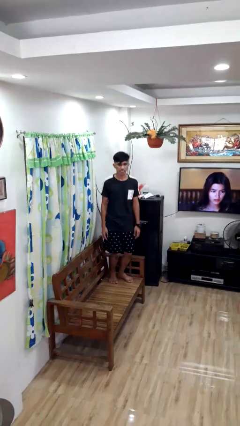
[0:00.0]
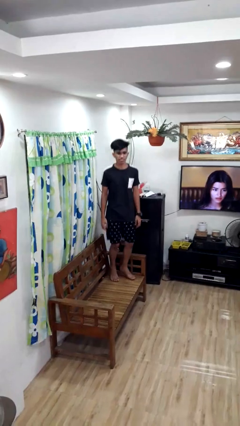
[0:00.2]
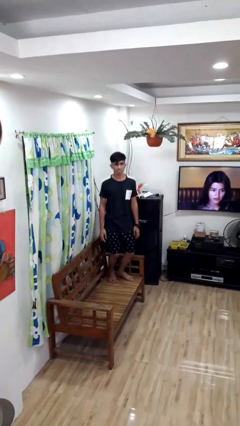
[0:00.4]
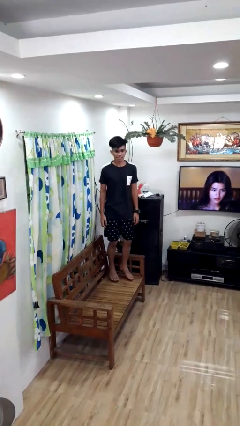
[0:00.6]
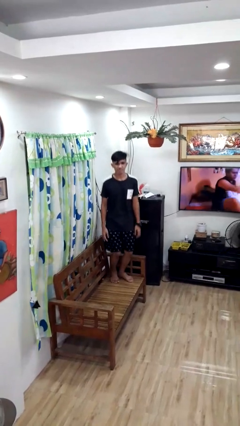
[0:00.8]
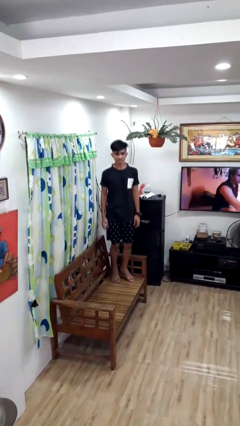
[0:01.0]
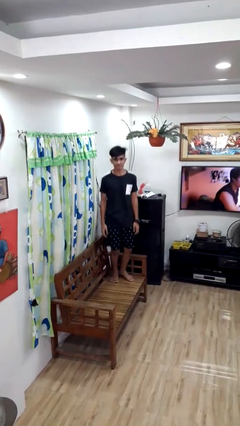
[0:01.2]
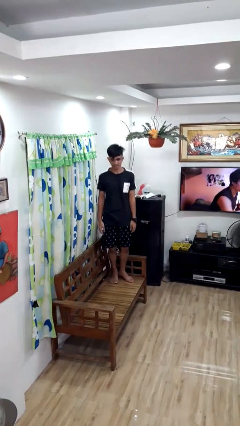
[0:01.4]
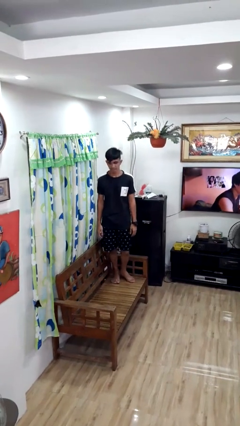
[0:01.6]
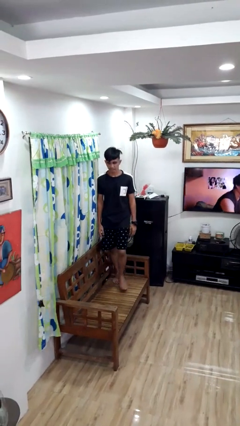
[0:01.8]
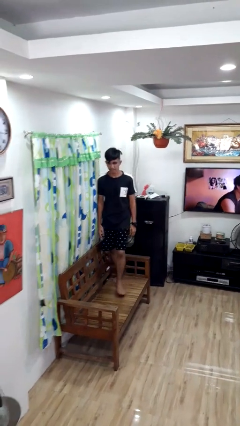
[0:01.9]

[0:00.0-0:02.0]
person jumps on couch

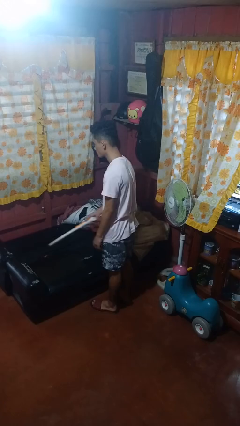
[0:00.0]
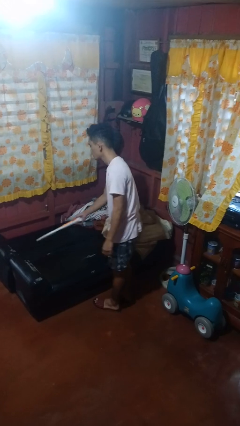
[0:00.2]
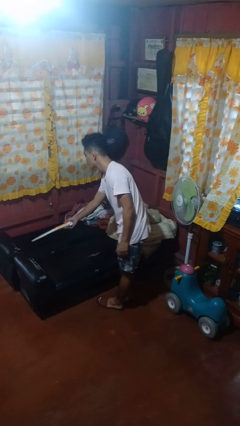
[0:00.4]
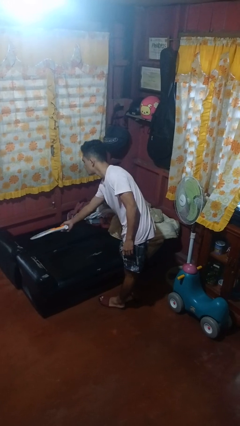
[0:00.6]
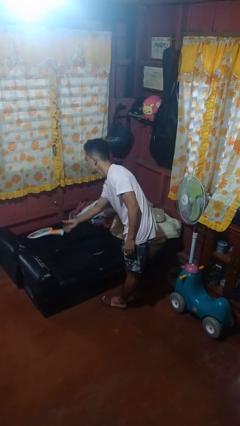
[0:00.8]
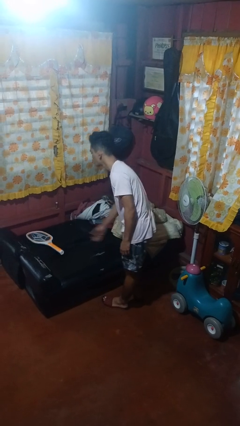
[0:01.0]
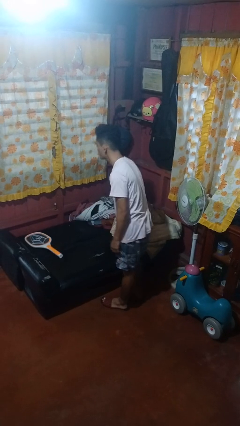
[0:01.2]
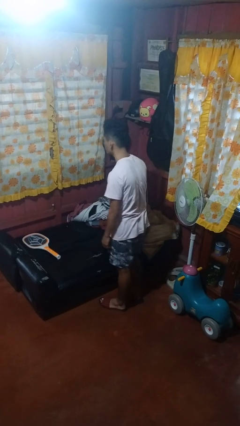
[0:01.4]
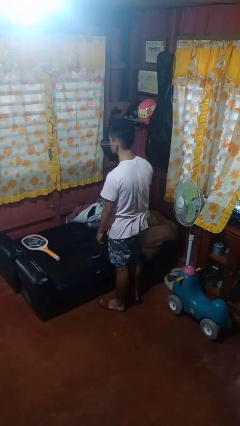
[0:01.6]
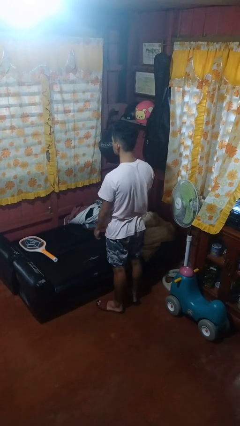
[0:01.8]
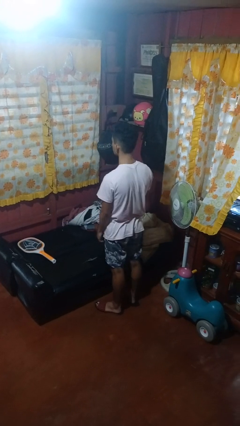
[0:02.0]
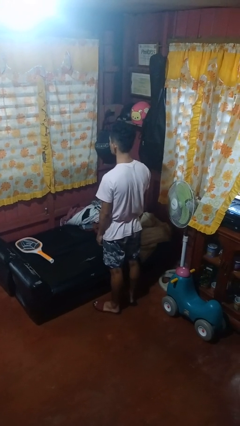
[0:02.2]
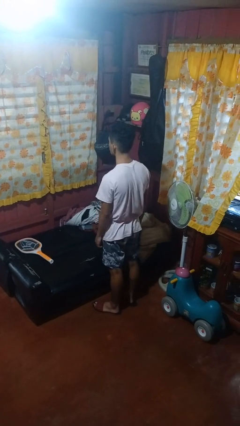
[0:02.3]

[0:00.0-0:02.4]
person puts down object on couch

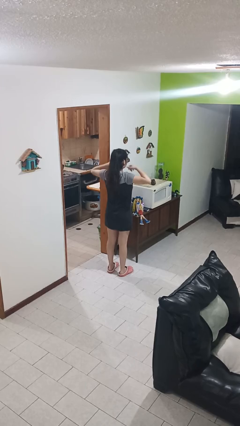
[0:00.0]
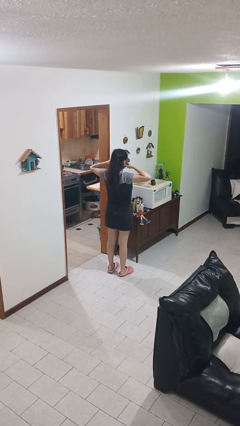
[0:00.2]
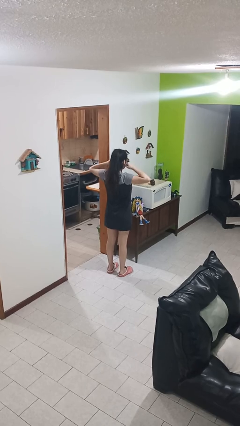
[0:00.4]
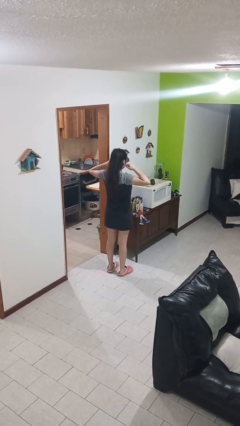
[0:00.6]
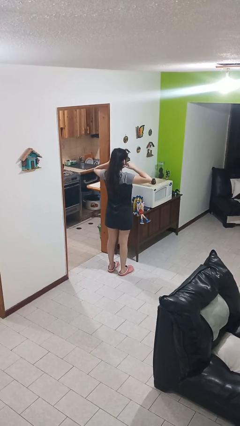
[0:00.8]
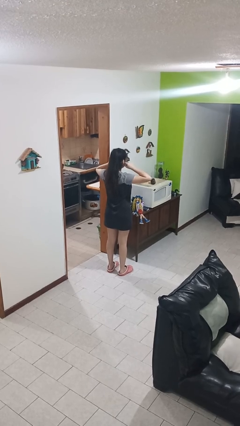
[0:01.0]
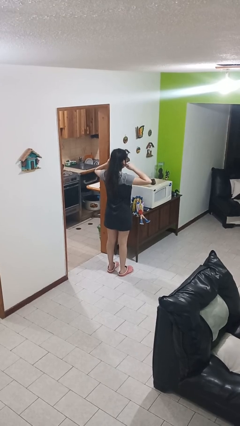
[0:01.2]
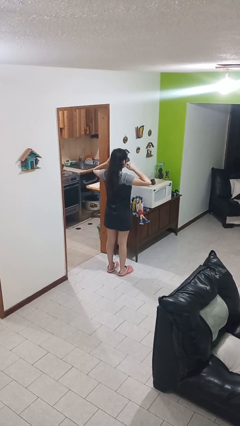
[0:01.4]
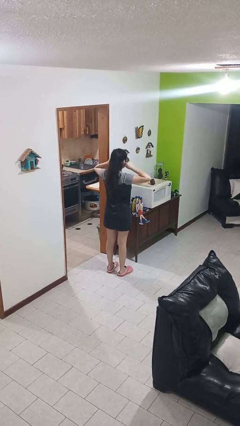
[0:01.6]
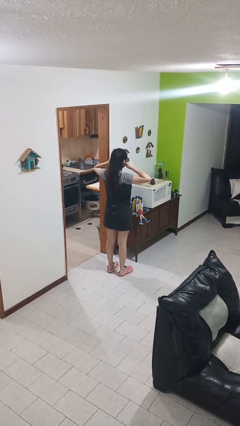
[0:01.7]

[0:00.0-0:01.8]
person touches earlobe

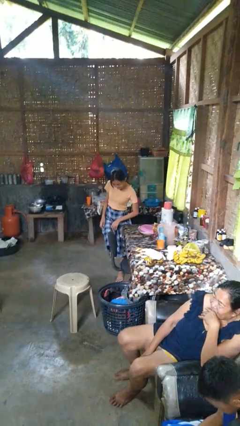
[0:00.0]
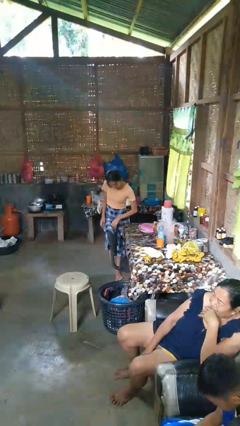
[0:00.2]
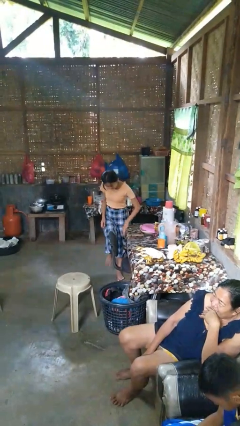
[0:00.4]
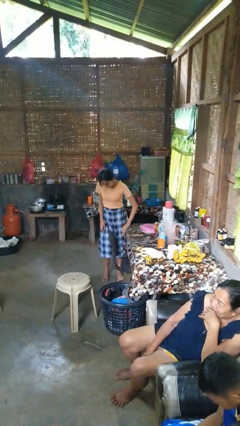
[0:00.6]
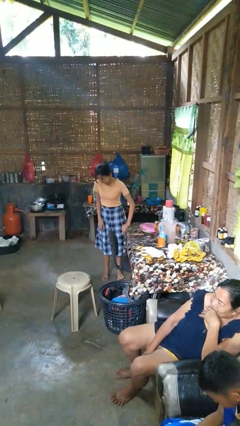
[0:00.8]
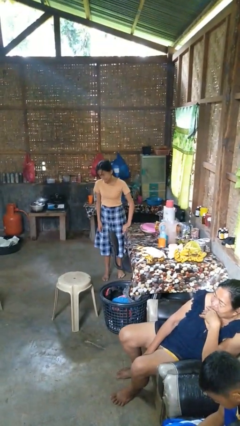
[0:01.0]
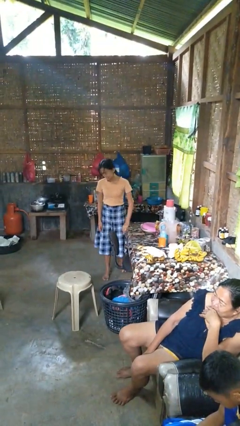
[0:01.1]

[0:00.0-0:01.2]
person bumps into table

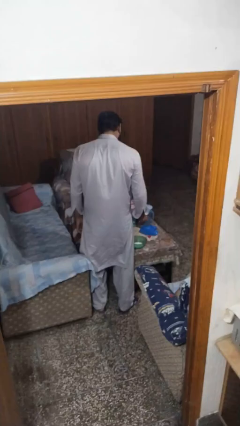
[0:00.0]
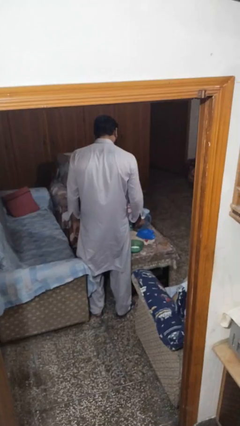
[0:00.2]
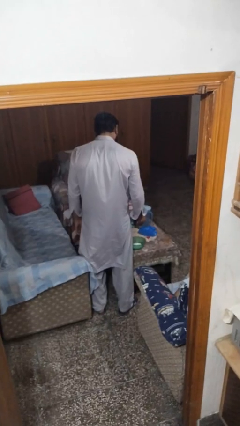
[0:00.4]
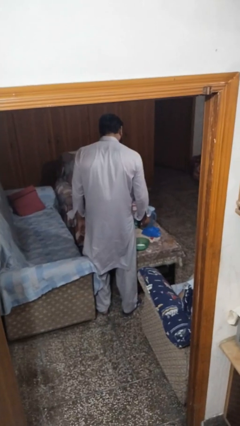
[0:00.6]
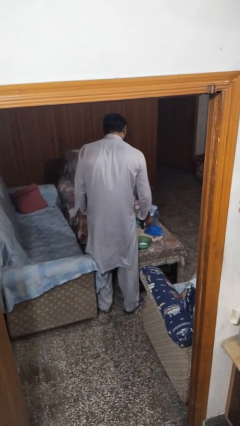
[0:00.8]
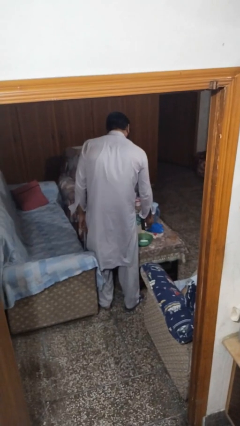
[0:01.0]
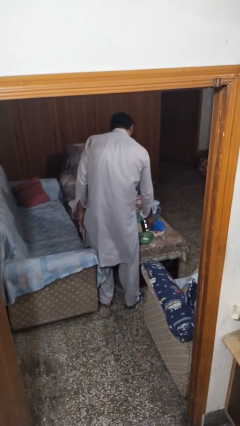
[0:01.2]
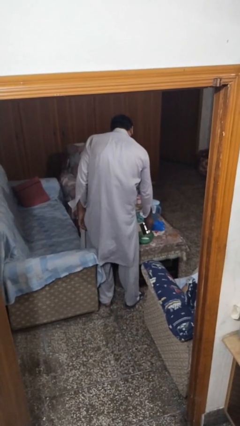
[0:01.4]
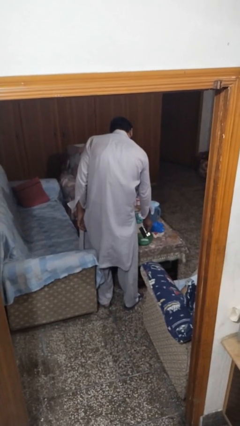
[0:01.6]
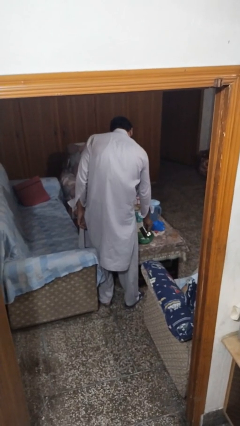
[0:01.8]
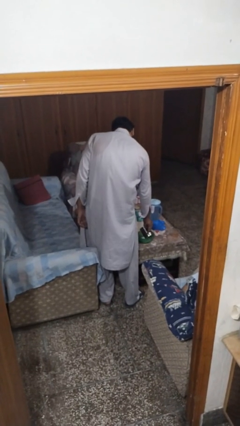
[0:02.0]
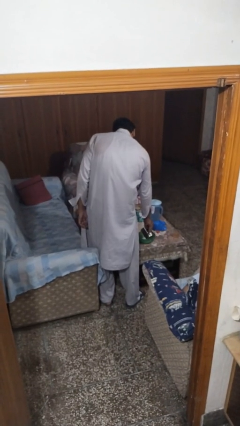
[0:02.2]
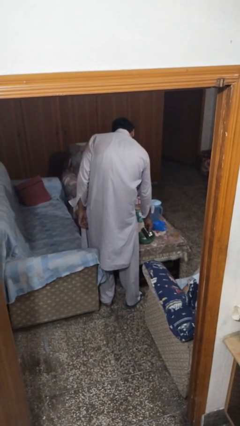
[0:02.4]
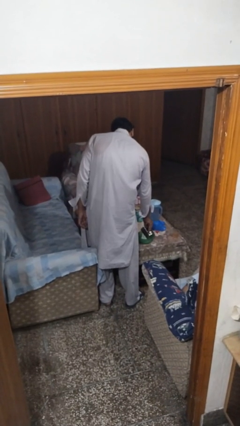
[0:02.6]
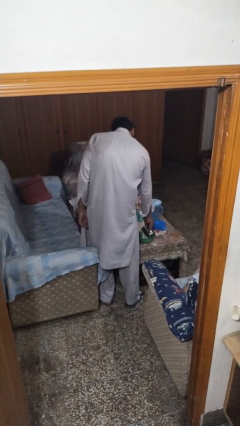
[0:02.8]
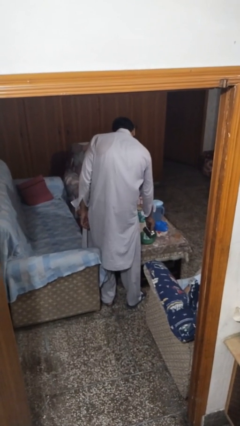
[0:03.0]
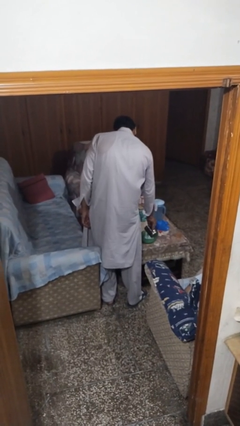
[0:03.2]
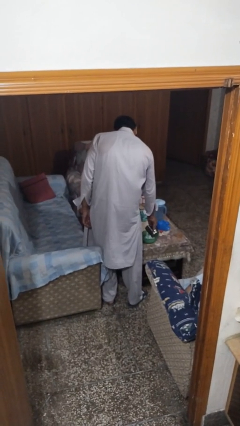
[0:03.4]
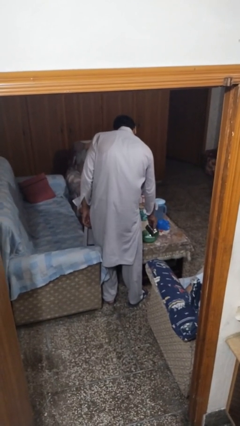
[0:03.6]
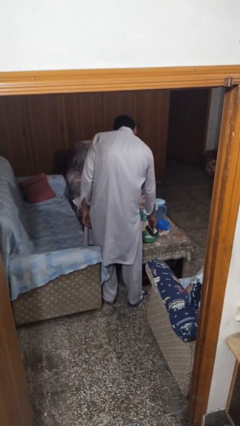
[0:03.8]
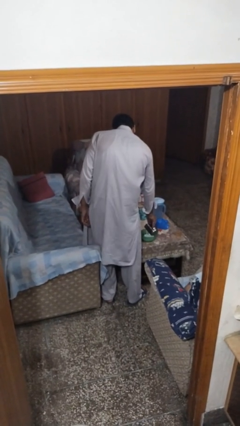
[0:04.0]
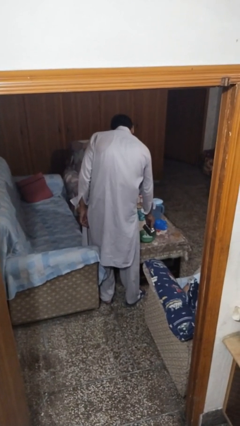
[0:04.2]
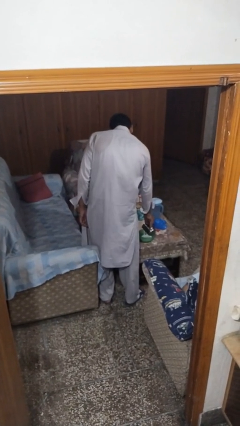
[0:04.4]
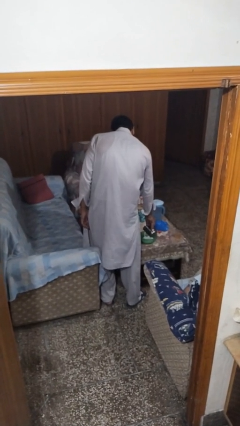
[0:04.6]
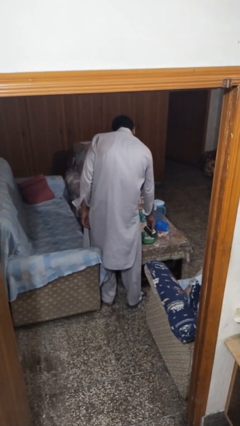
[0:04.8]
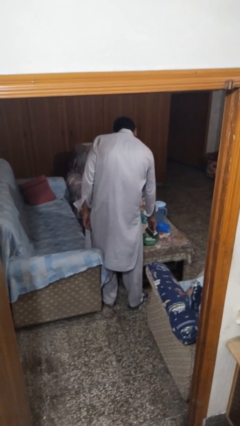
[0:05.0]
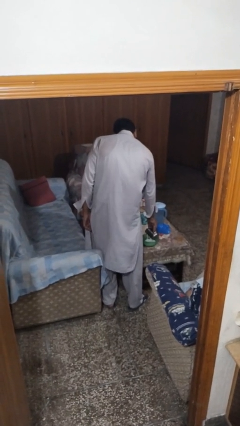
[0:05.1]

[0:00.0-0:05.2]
person pours into bowl

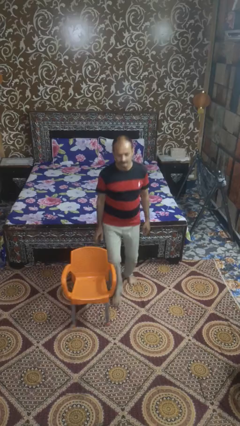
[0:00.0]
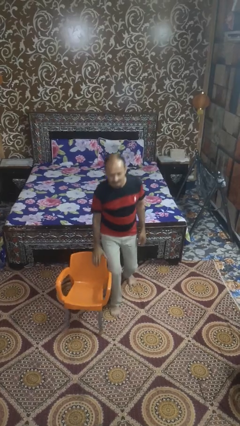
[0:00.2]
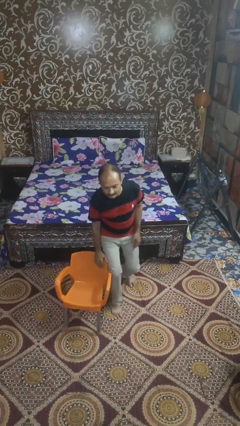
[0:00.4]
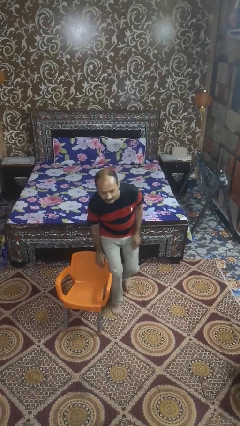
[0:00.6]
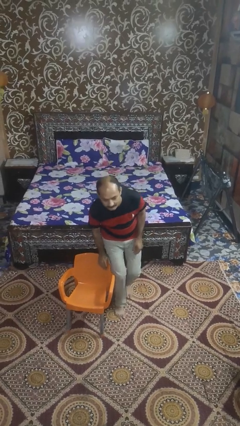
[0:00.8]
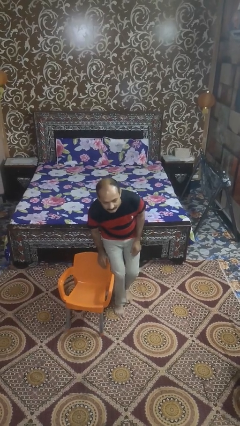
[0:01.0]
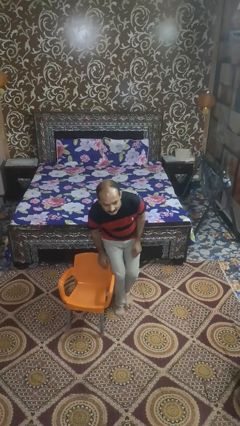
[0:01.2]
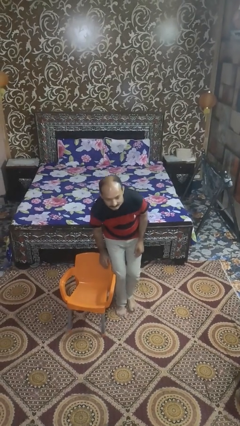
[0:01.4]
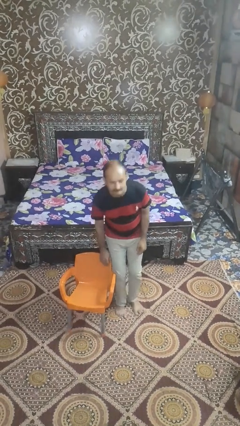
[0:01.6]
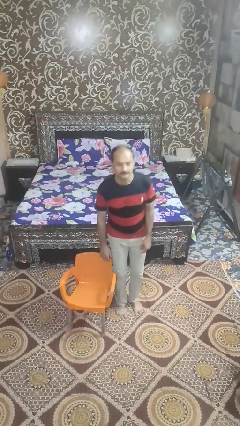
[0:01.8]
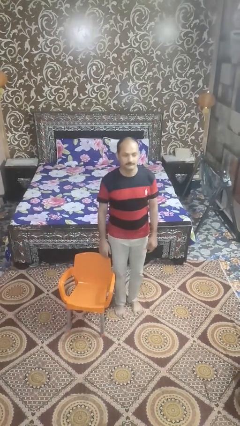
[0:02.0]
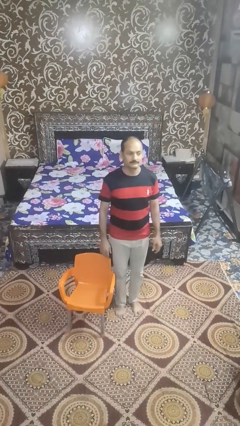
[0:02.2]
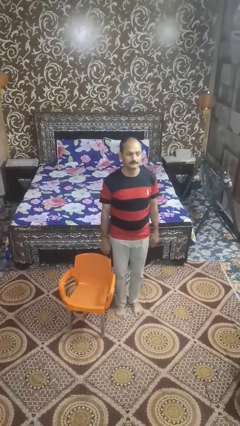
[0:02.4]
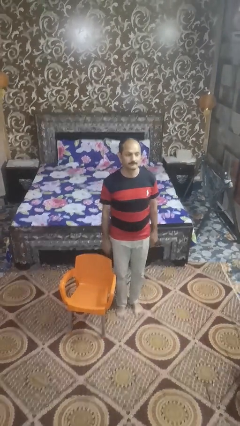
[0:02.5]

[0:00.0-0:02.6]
person trips on object on floor

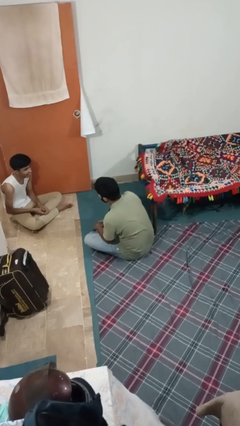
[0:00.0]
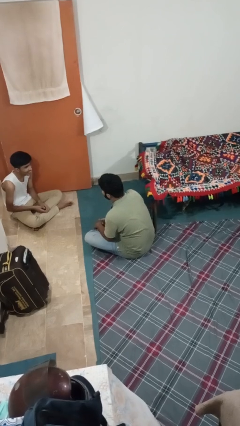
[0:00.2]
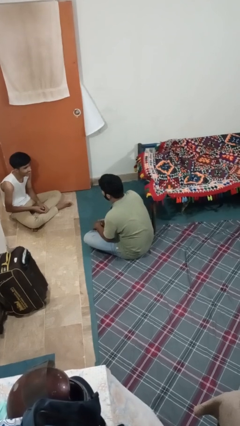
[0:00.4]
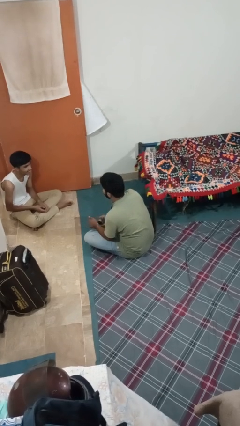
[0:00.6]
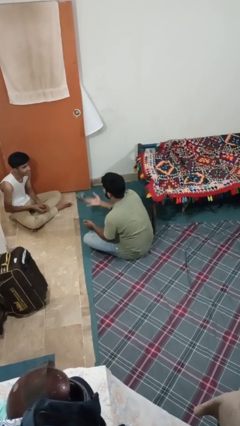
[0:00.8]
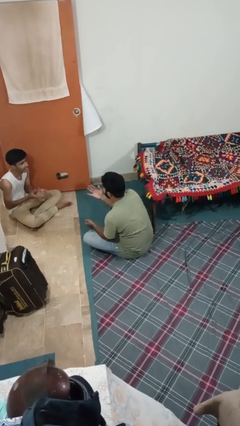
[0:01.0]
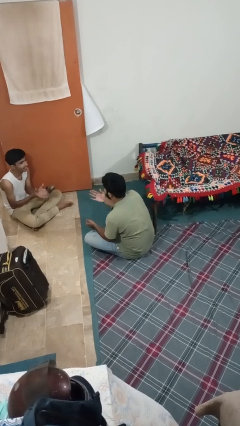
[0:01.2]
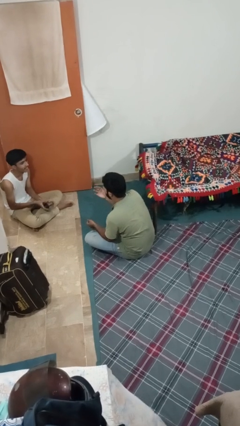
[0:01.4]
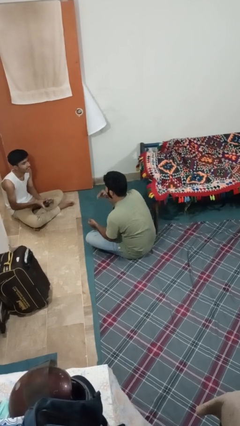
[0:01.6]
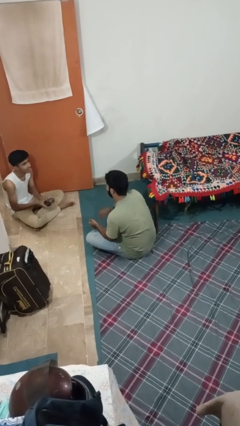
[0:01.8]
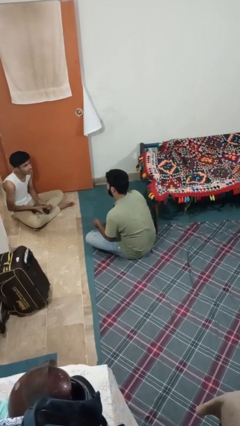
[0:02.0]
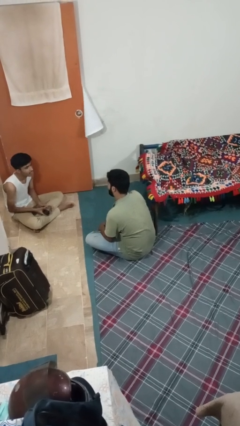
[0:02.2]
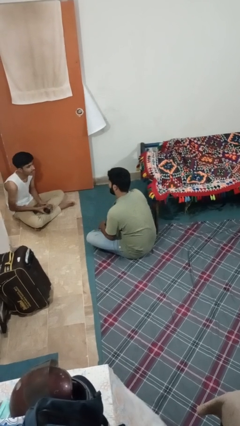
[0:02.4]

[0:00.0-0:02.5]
person throws object to person
